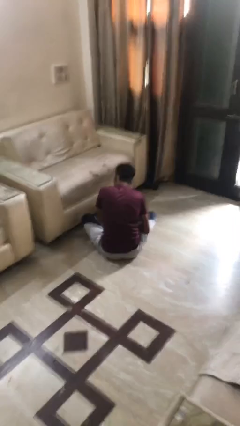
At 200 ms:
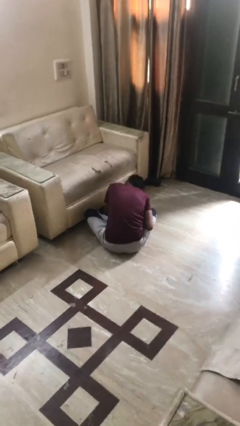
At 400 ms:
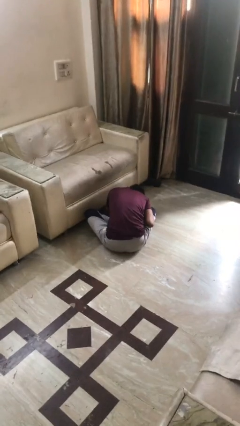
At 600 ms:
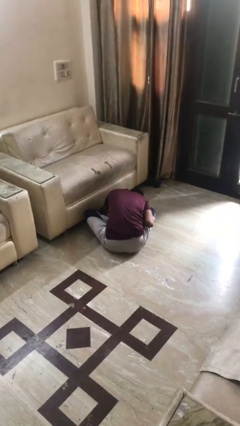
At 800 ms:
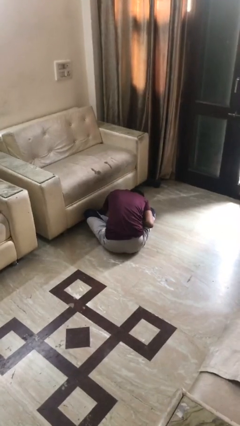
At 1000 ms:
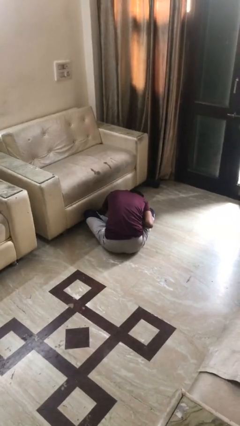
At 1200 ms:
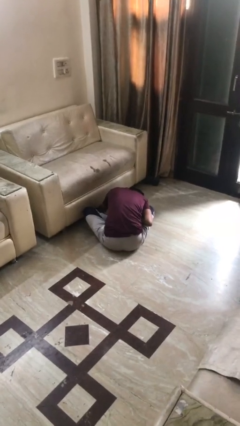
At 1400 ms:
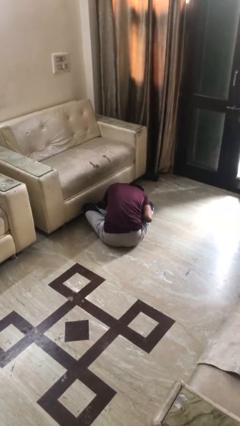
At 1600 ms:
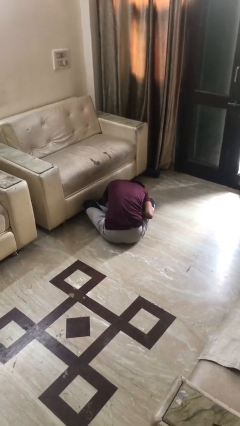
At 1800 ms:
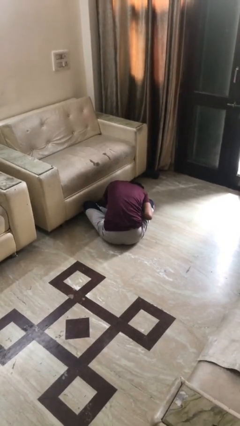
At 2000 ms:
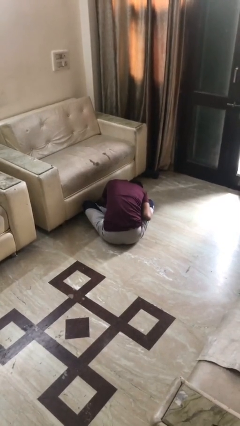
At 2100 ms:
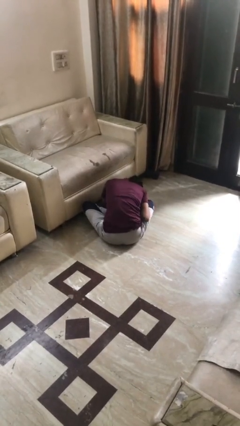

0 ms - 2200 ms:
person searches under couch

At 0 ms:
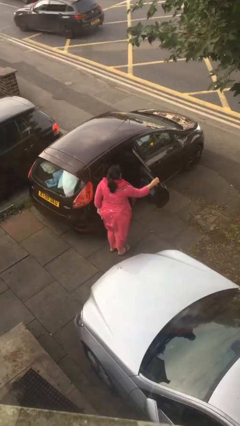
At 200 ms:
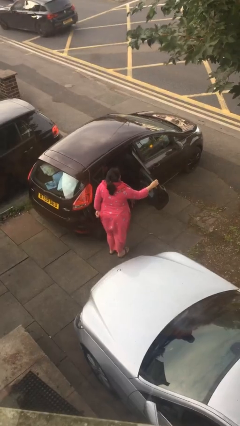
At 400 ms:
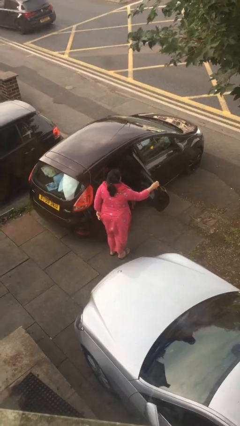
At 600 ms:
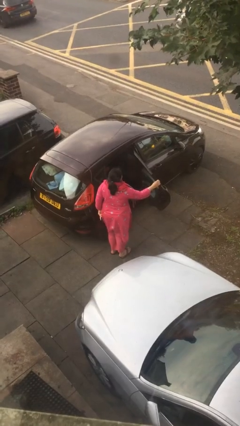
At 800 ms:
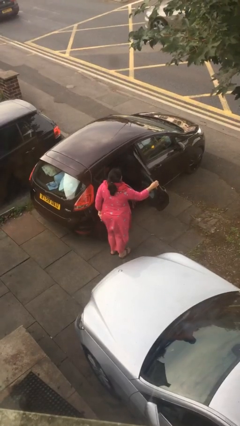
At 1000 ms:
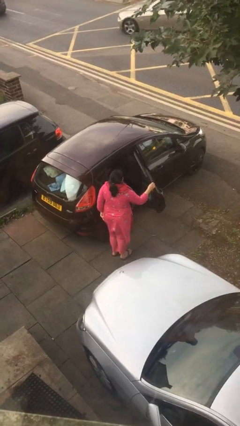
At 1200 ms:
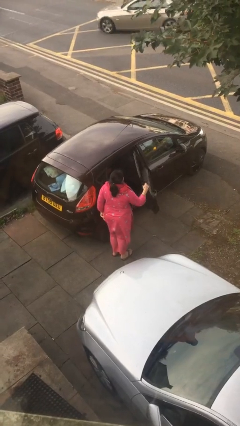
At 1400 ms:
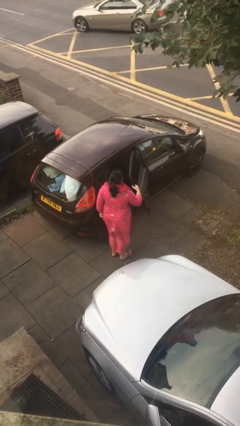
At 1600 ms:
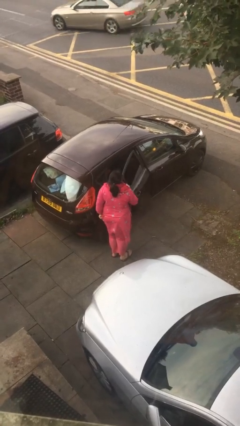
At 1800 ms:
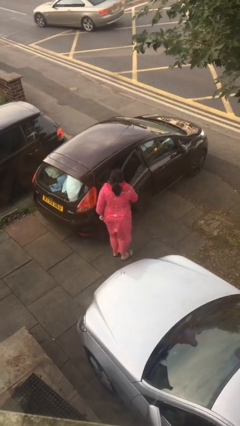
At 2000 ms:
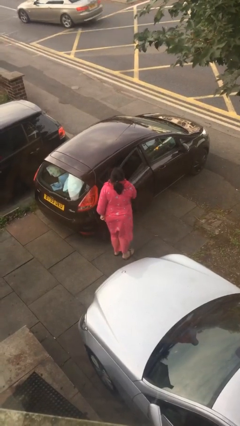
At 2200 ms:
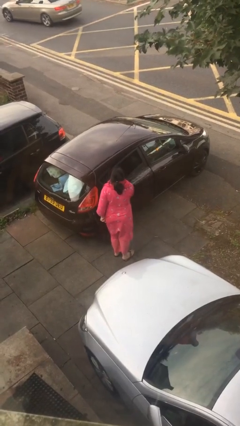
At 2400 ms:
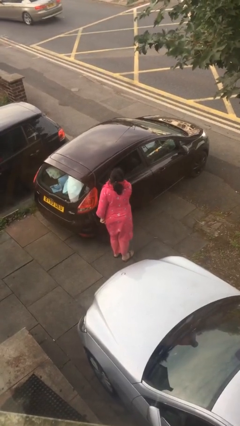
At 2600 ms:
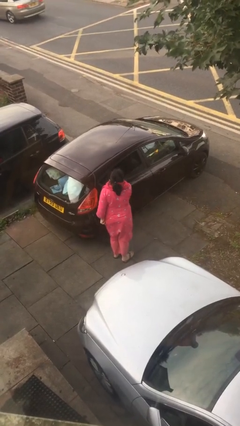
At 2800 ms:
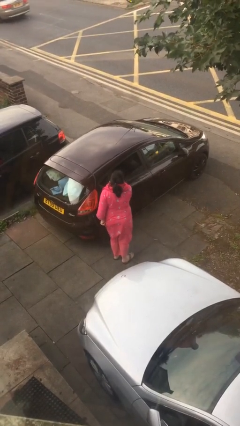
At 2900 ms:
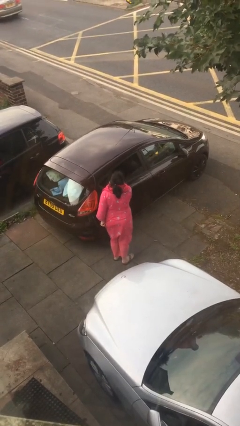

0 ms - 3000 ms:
person closes car door

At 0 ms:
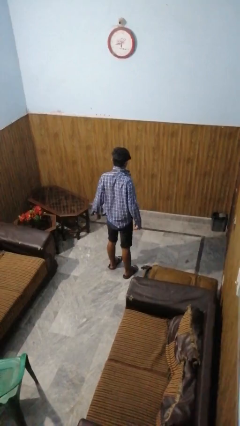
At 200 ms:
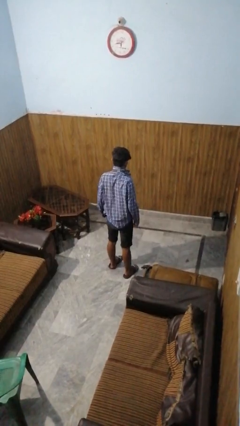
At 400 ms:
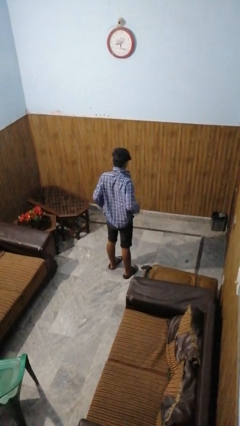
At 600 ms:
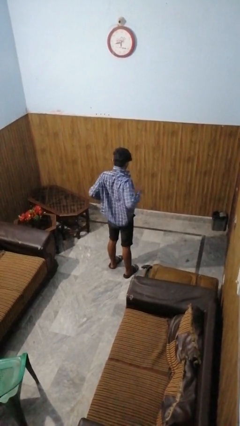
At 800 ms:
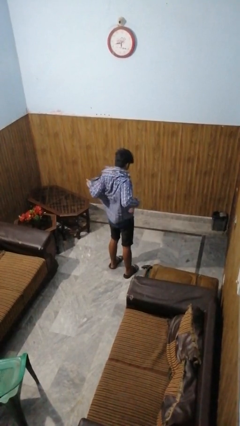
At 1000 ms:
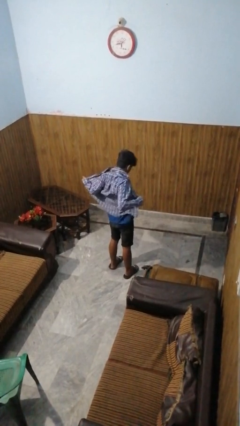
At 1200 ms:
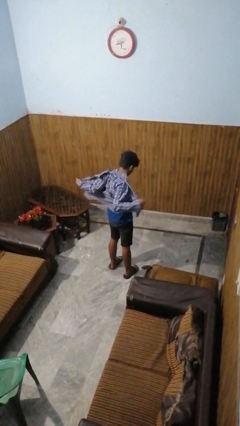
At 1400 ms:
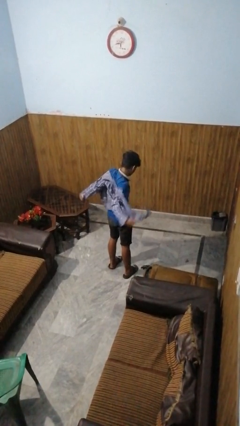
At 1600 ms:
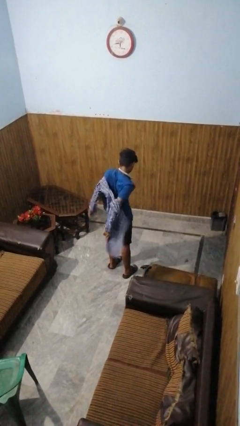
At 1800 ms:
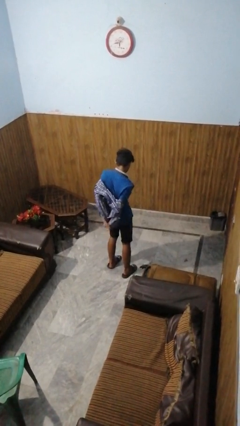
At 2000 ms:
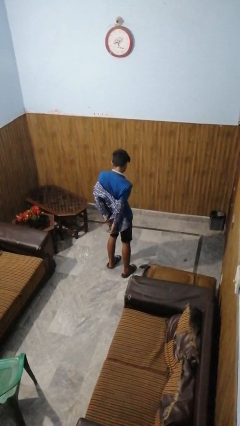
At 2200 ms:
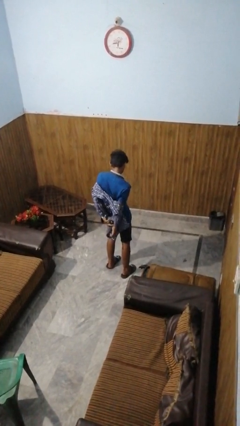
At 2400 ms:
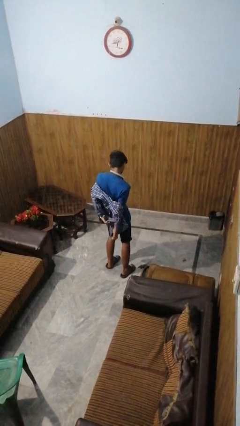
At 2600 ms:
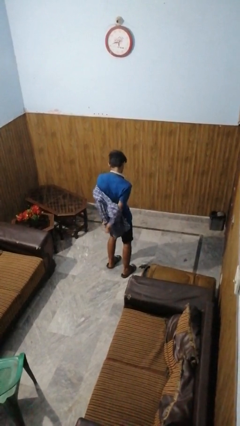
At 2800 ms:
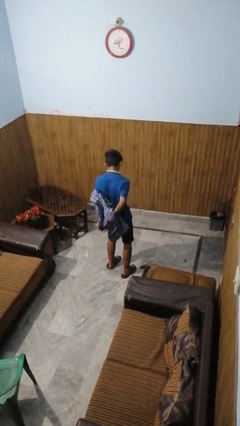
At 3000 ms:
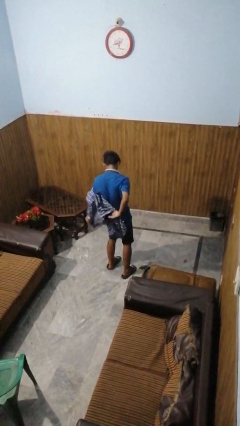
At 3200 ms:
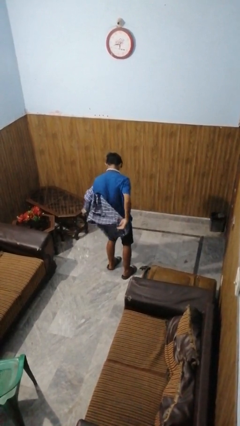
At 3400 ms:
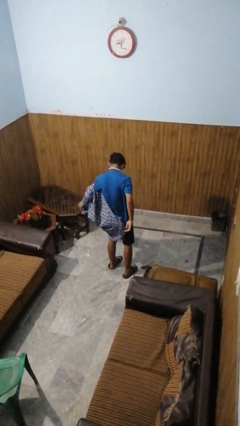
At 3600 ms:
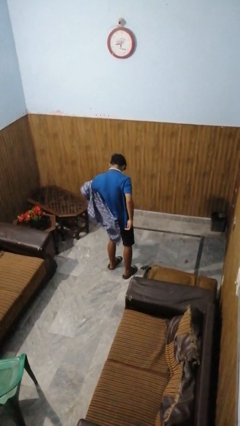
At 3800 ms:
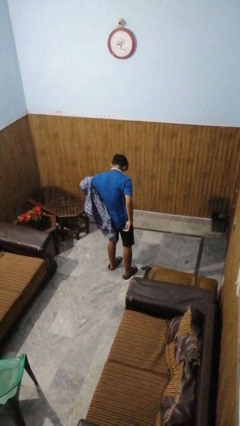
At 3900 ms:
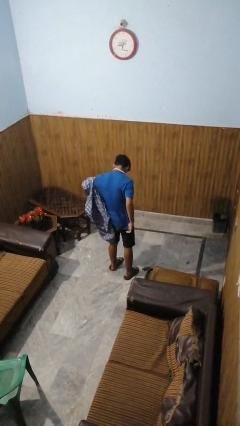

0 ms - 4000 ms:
person takes off shirt

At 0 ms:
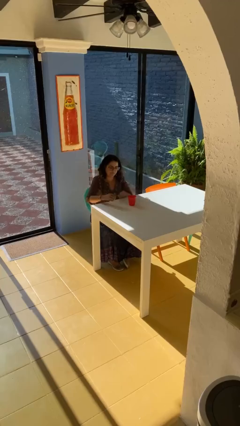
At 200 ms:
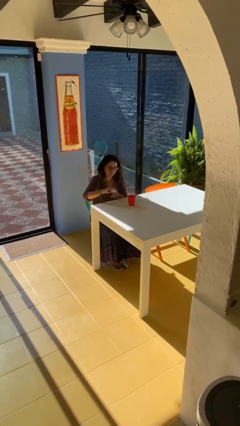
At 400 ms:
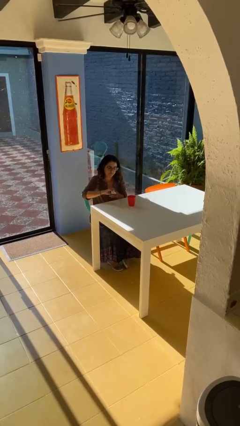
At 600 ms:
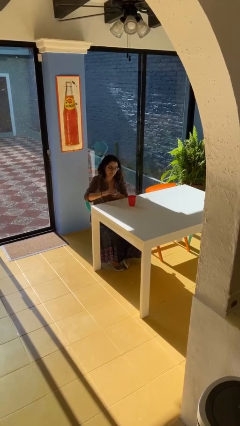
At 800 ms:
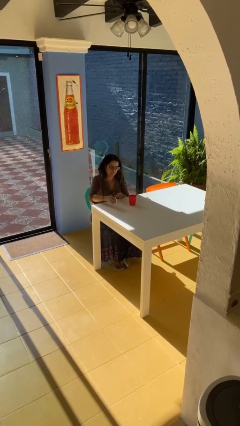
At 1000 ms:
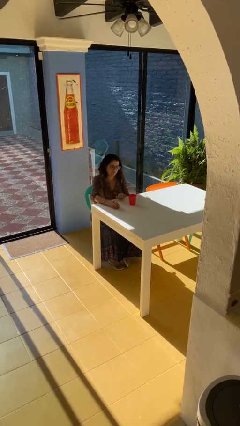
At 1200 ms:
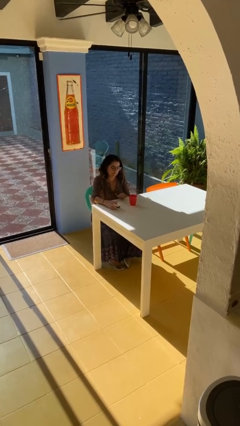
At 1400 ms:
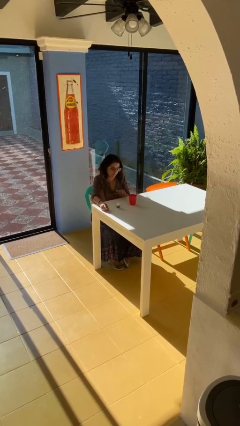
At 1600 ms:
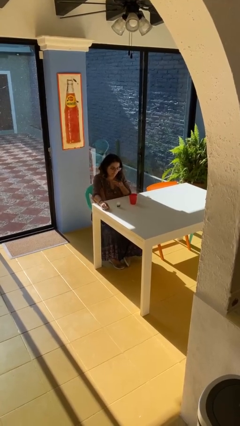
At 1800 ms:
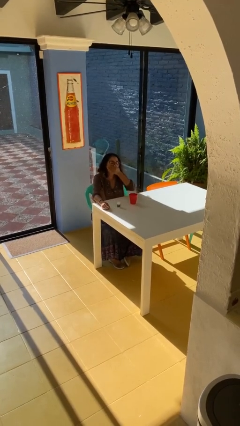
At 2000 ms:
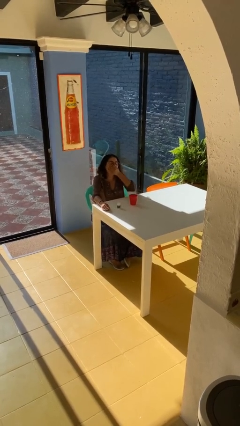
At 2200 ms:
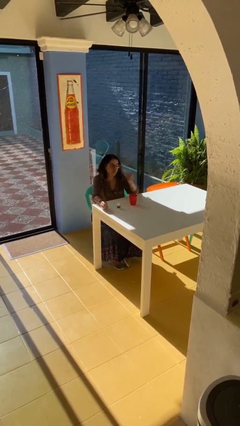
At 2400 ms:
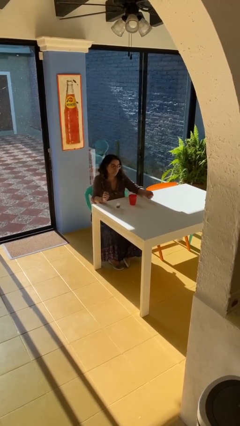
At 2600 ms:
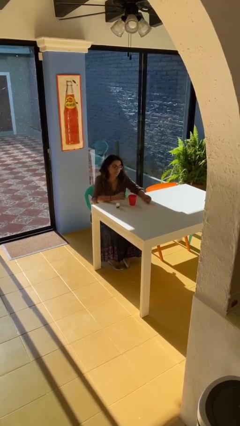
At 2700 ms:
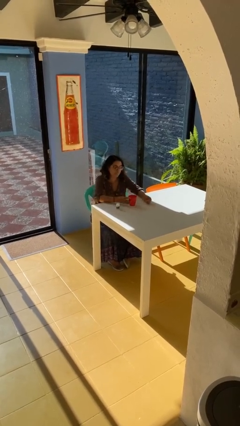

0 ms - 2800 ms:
person takes medicine pills

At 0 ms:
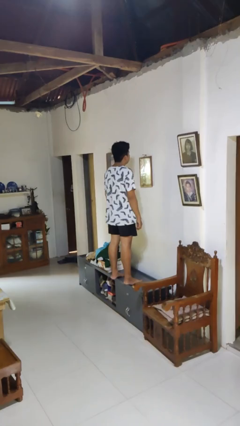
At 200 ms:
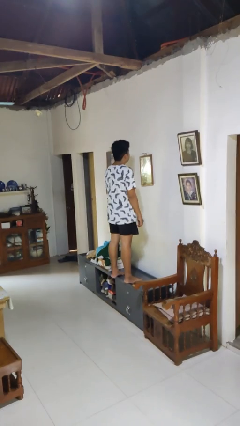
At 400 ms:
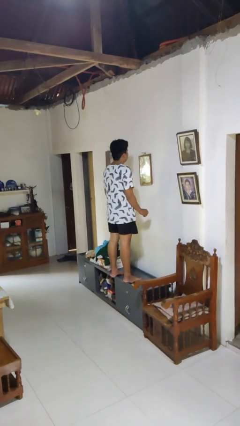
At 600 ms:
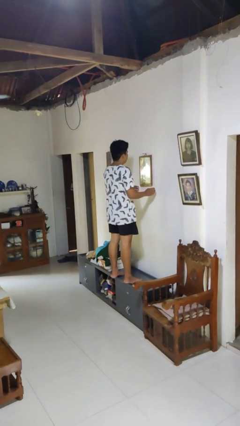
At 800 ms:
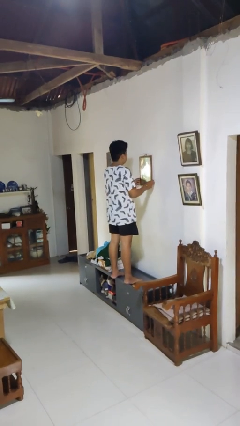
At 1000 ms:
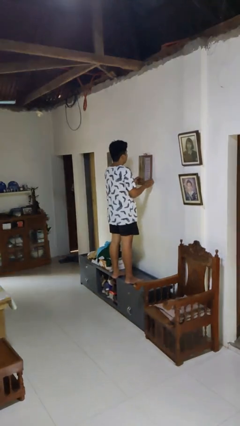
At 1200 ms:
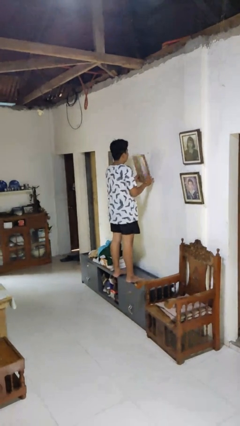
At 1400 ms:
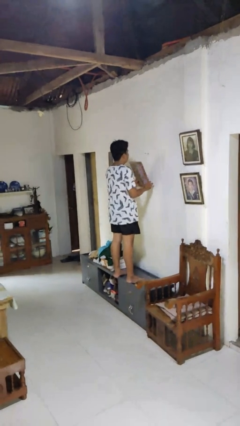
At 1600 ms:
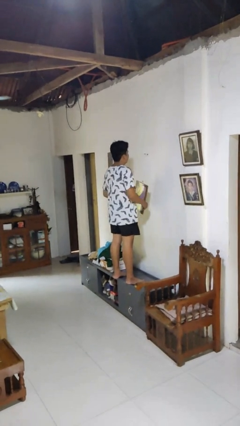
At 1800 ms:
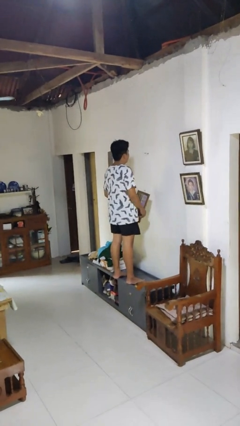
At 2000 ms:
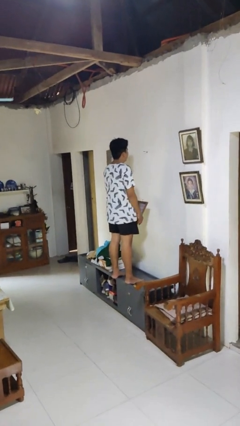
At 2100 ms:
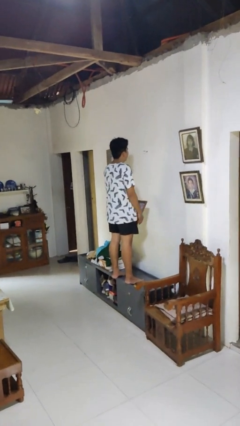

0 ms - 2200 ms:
person takes down picture frame

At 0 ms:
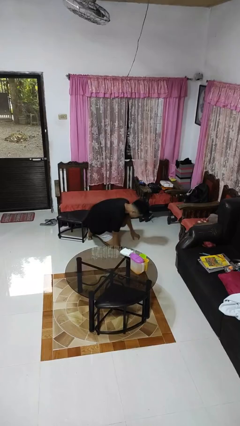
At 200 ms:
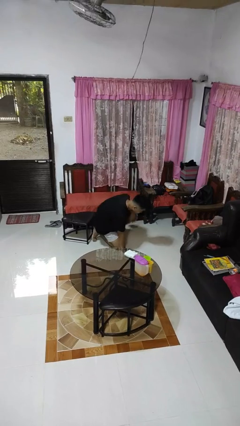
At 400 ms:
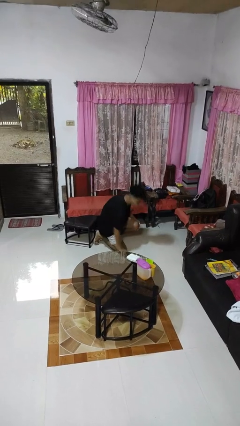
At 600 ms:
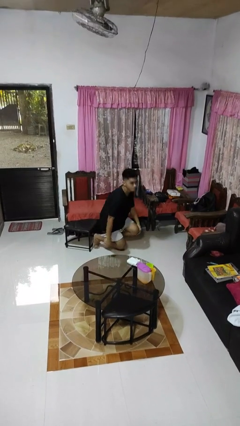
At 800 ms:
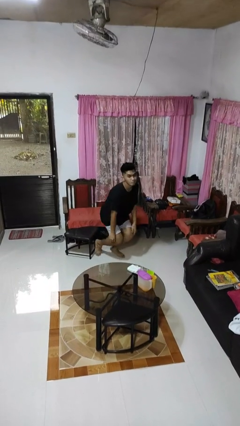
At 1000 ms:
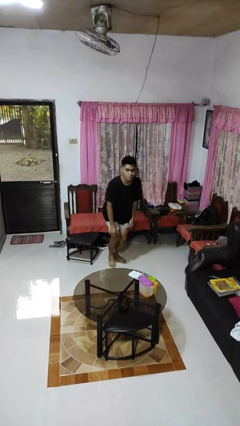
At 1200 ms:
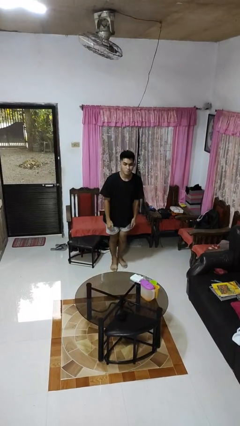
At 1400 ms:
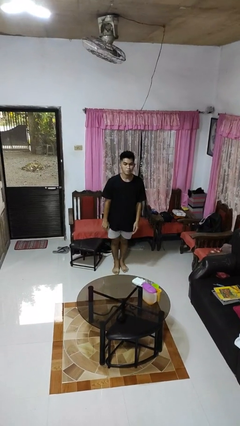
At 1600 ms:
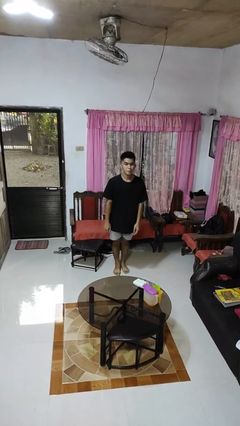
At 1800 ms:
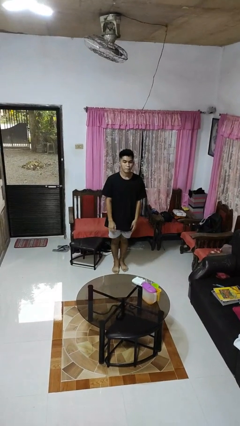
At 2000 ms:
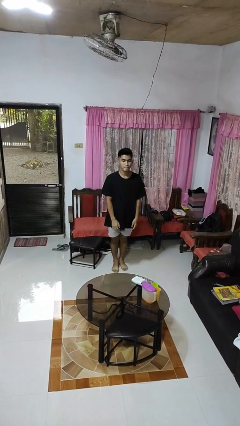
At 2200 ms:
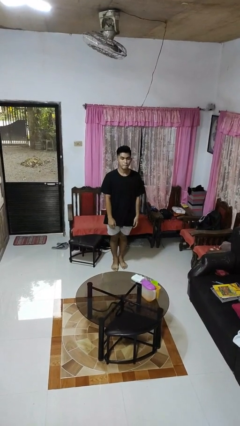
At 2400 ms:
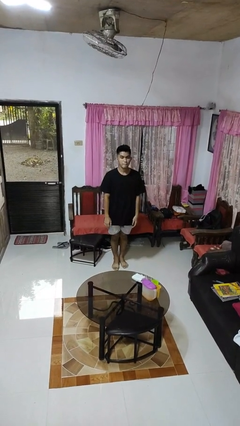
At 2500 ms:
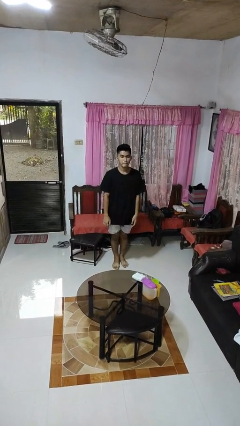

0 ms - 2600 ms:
person stands up from floor
